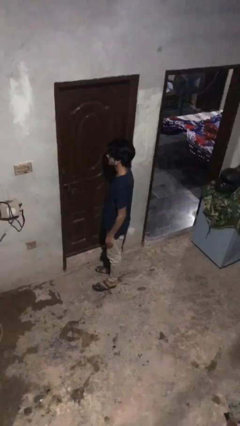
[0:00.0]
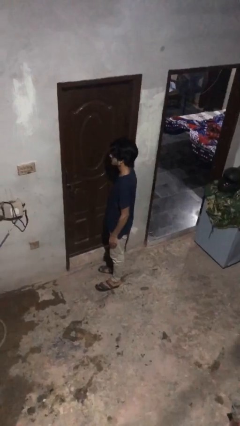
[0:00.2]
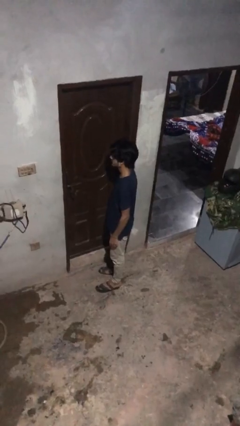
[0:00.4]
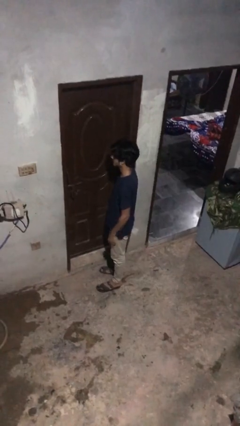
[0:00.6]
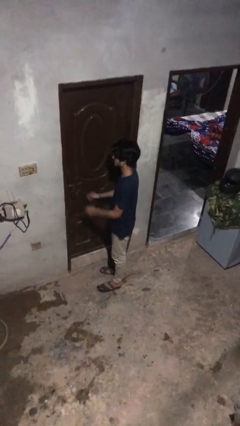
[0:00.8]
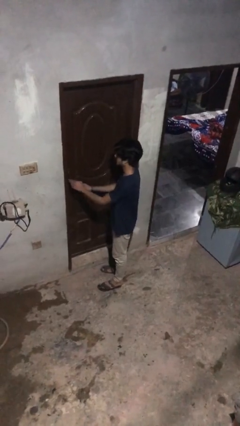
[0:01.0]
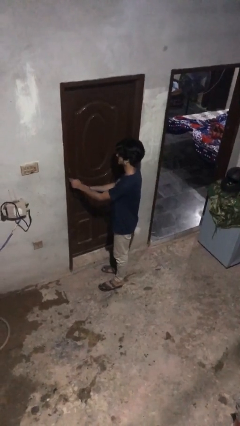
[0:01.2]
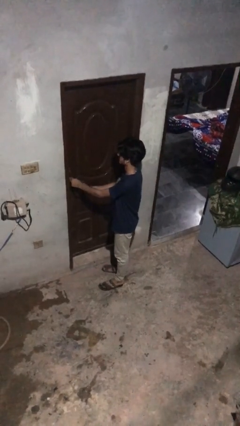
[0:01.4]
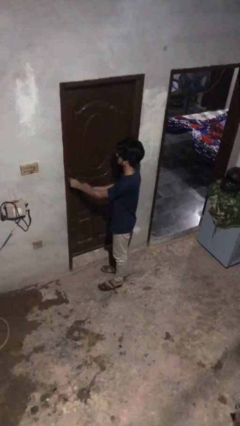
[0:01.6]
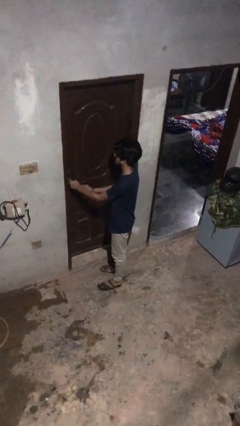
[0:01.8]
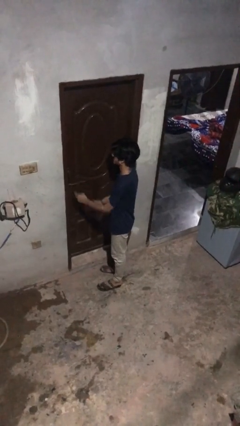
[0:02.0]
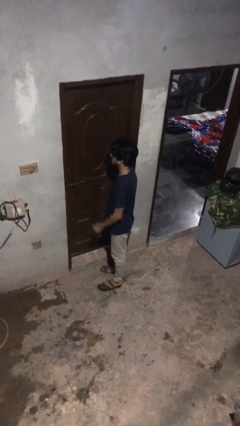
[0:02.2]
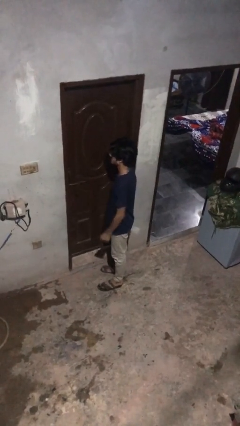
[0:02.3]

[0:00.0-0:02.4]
person unlocks door with keys

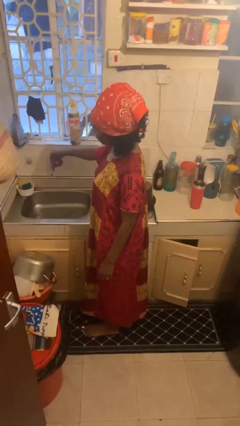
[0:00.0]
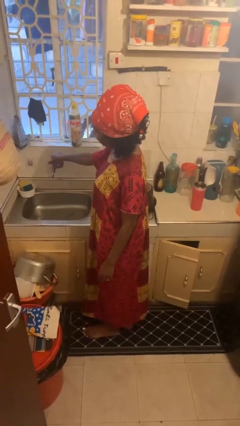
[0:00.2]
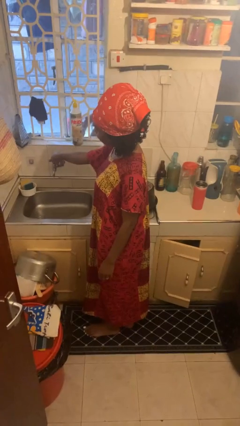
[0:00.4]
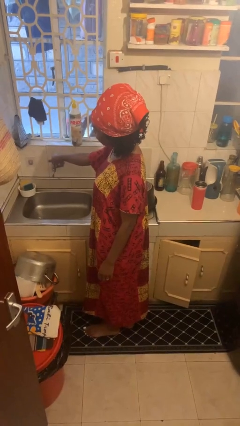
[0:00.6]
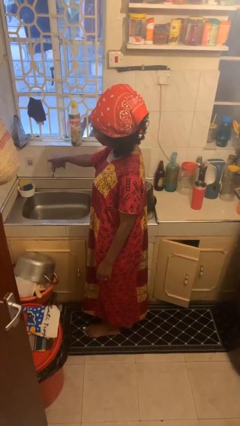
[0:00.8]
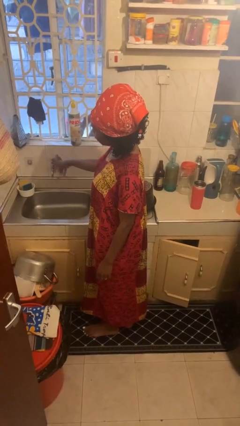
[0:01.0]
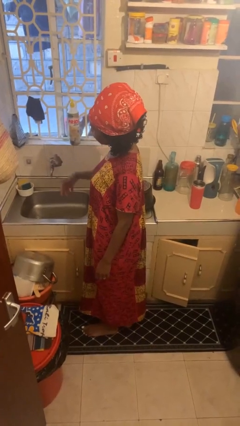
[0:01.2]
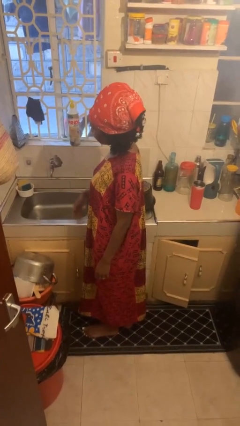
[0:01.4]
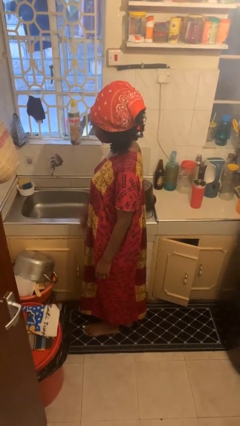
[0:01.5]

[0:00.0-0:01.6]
person turns off faucet

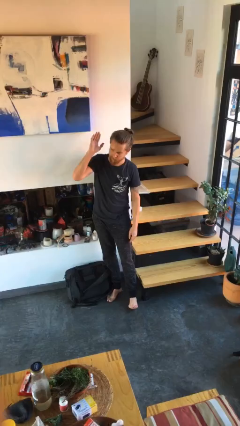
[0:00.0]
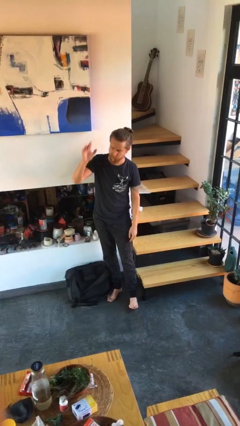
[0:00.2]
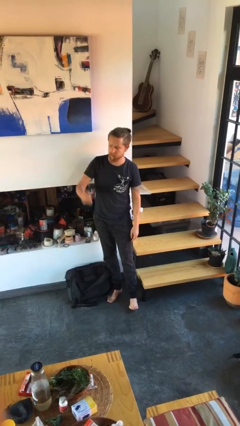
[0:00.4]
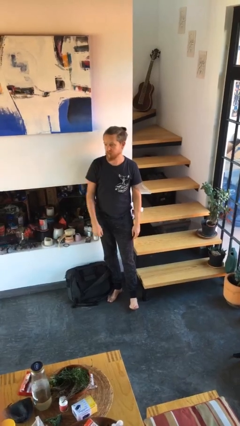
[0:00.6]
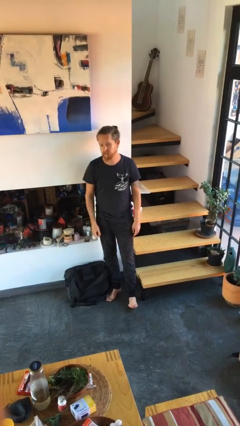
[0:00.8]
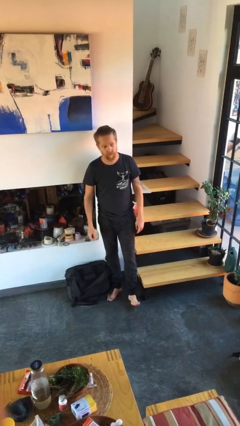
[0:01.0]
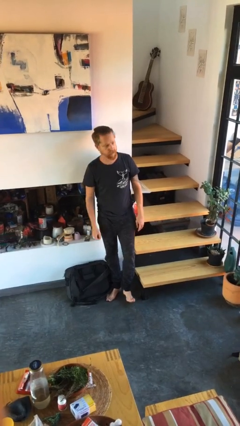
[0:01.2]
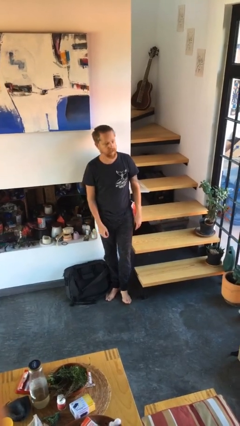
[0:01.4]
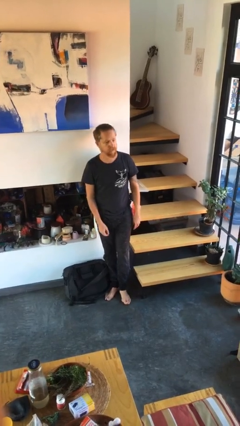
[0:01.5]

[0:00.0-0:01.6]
person gestures lower hand

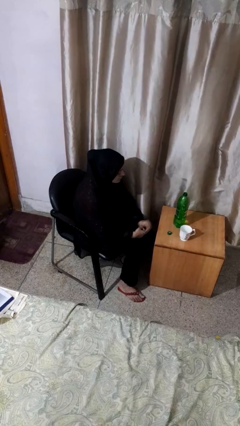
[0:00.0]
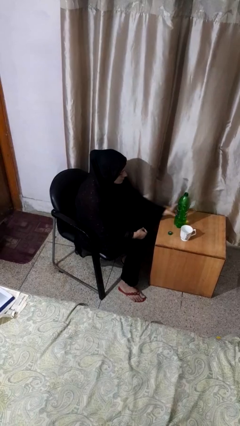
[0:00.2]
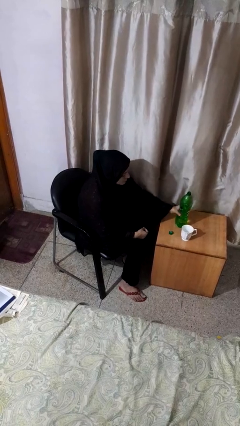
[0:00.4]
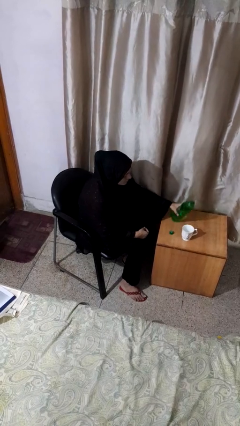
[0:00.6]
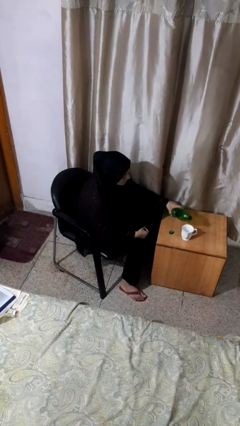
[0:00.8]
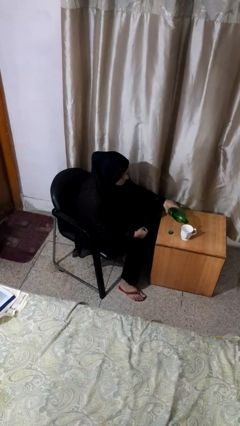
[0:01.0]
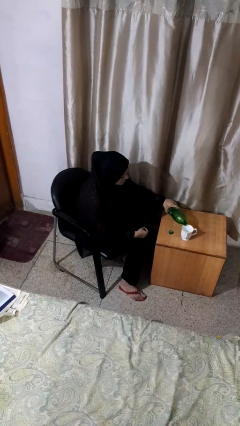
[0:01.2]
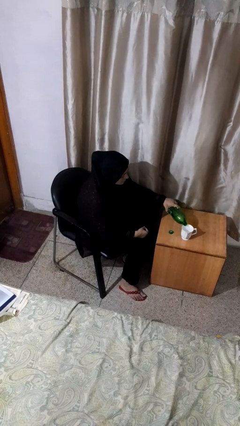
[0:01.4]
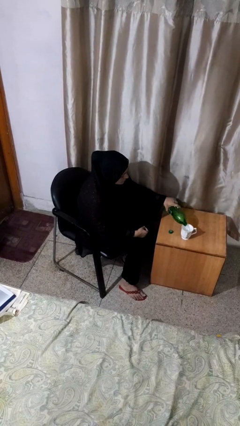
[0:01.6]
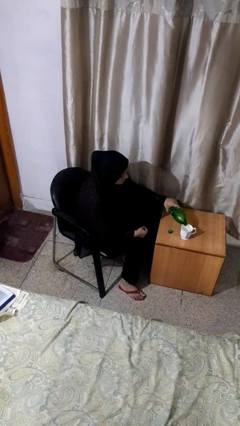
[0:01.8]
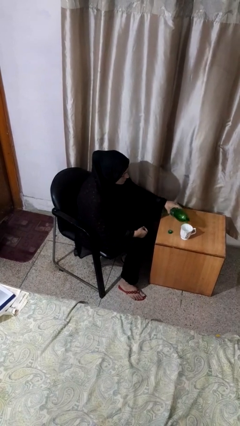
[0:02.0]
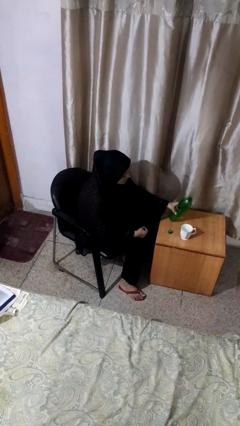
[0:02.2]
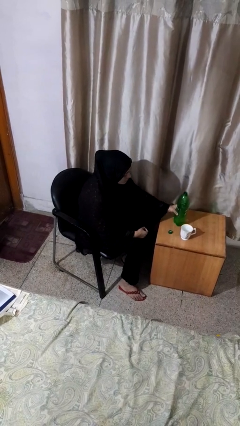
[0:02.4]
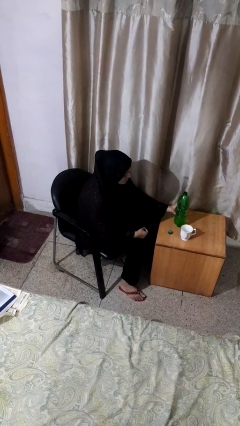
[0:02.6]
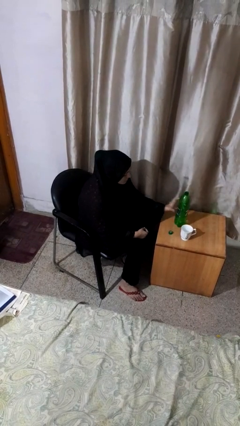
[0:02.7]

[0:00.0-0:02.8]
person pours liquid into cup

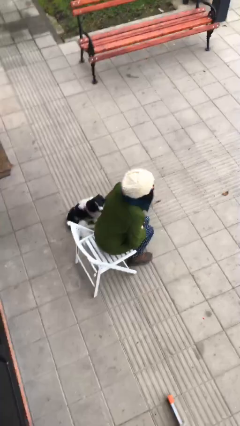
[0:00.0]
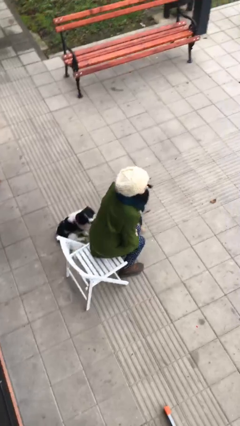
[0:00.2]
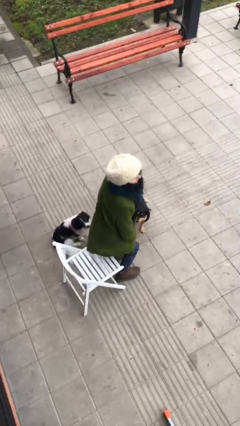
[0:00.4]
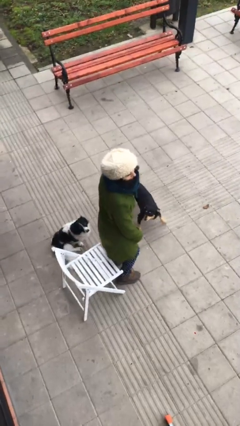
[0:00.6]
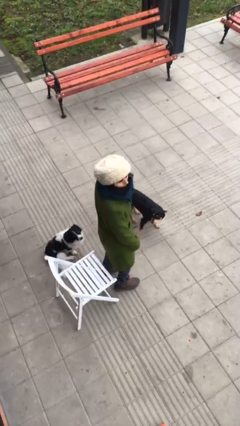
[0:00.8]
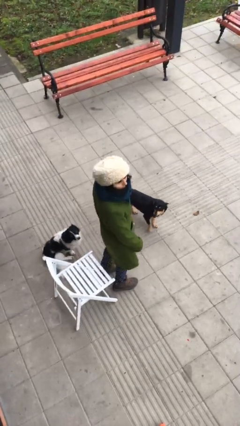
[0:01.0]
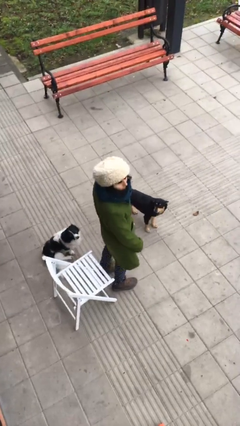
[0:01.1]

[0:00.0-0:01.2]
person stands up

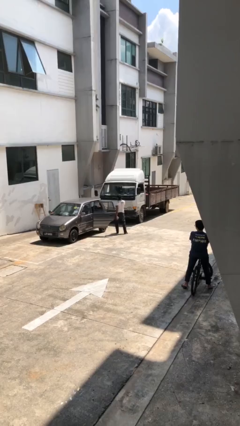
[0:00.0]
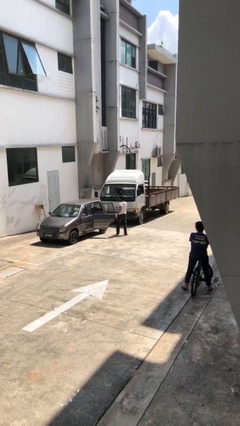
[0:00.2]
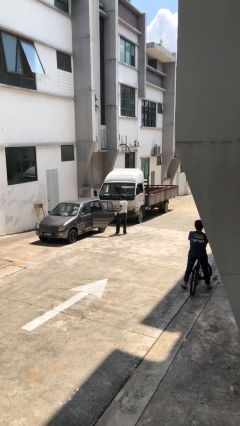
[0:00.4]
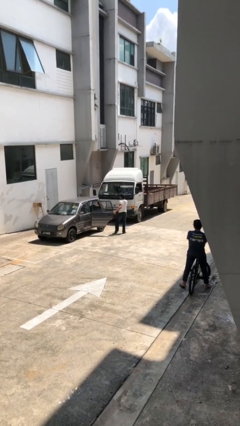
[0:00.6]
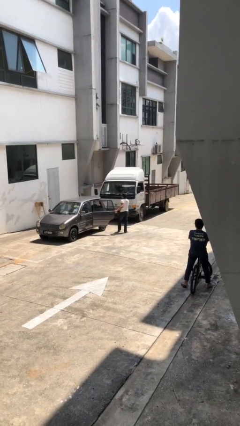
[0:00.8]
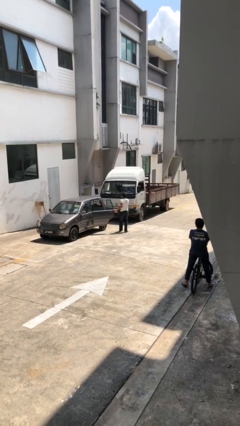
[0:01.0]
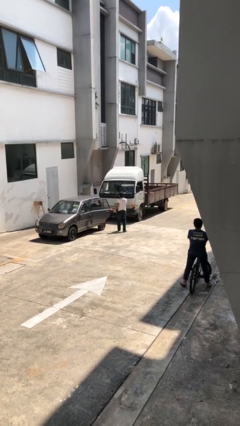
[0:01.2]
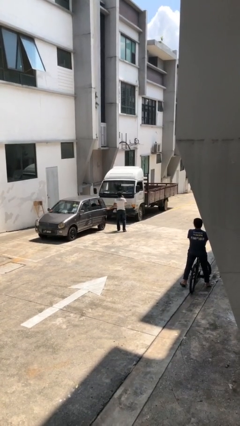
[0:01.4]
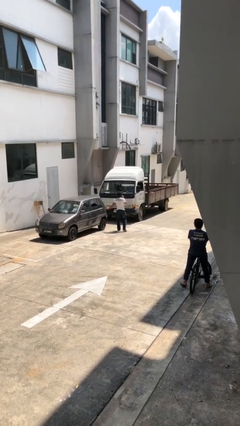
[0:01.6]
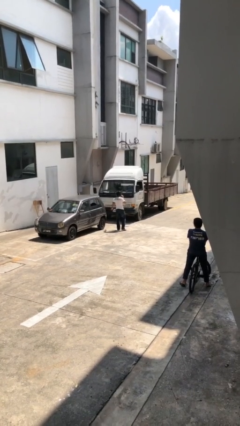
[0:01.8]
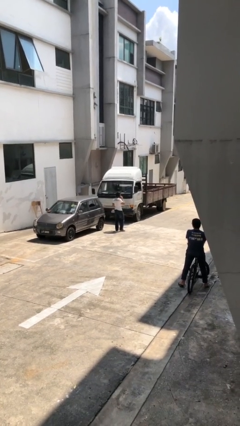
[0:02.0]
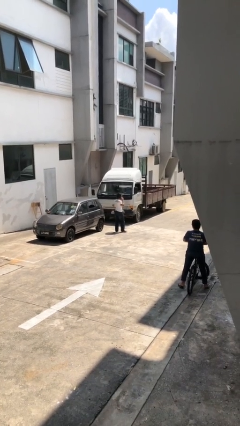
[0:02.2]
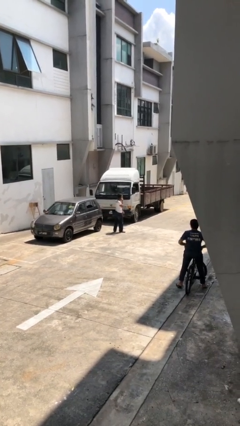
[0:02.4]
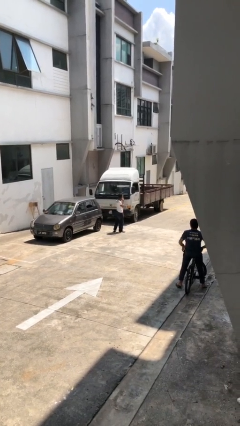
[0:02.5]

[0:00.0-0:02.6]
person closes car door

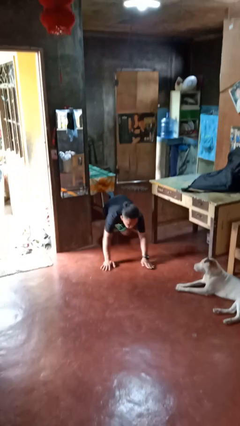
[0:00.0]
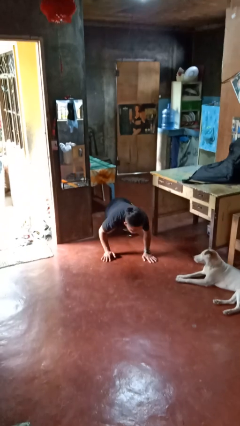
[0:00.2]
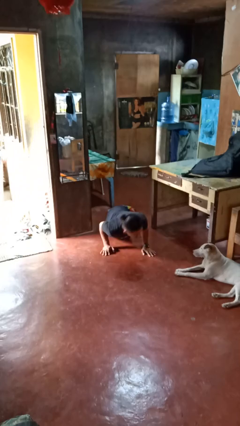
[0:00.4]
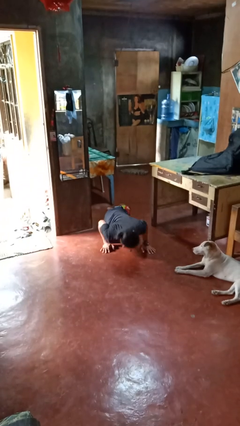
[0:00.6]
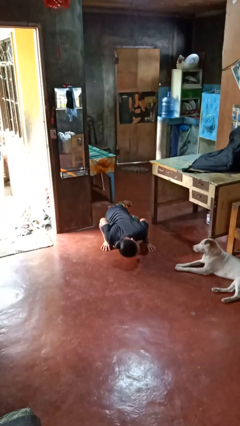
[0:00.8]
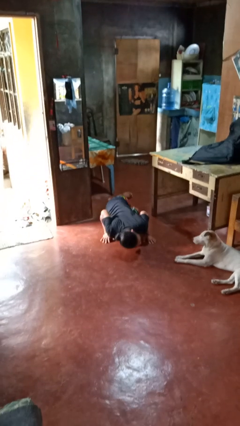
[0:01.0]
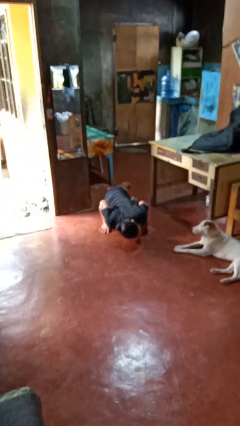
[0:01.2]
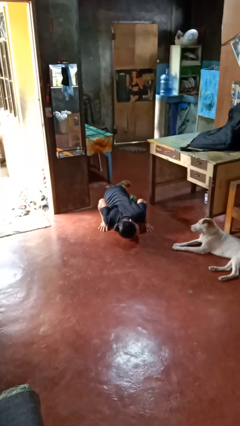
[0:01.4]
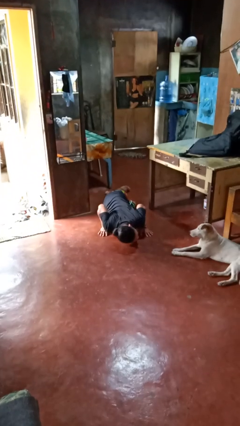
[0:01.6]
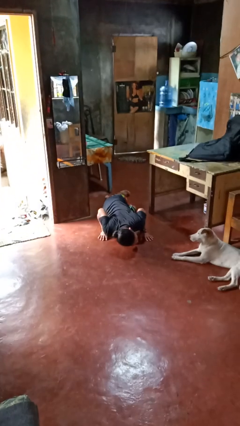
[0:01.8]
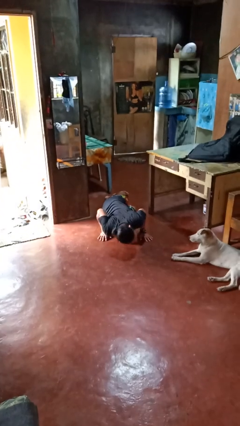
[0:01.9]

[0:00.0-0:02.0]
person lies down on floor

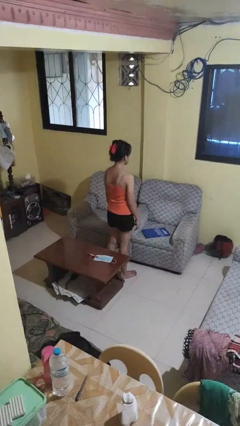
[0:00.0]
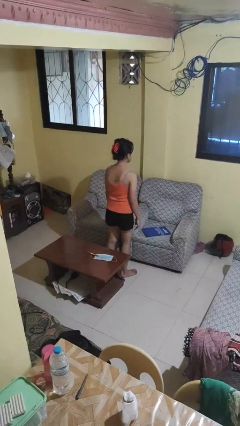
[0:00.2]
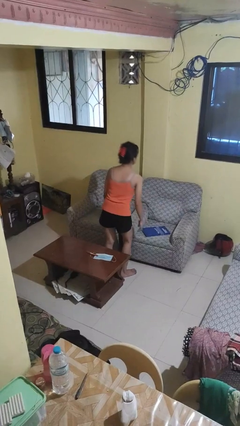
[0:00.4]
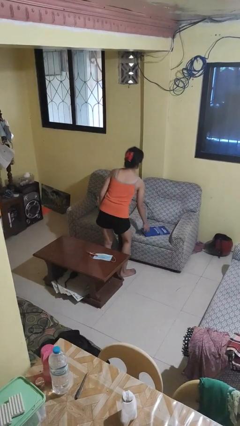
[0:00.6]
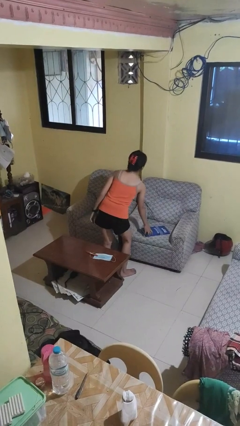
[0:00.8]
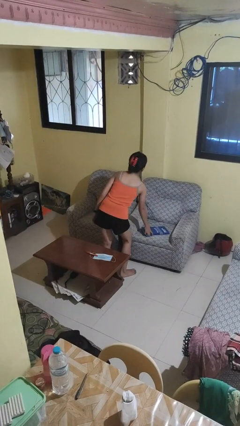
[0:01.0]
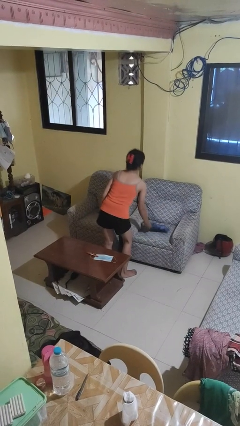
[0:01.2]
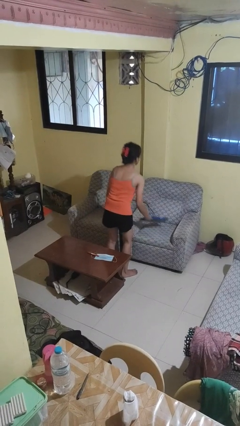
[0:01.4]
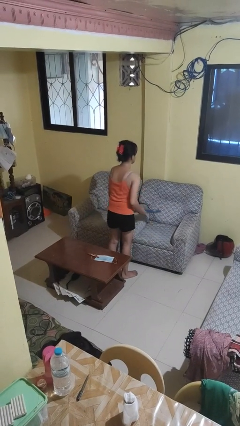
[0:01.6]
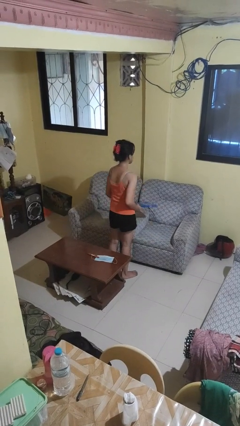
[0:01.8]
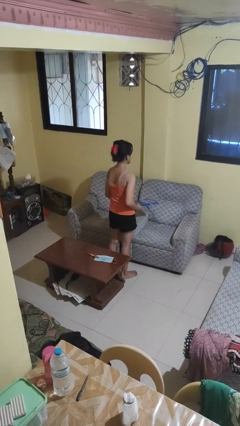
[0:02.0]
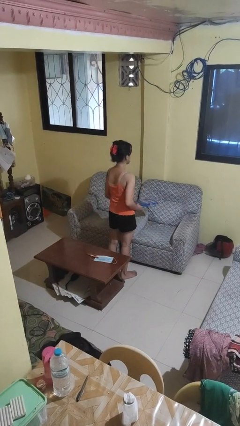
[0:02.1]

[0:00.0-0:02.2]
person picks up object from couch

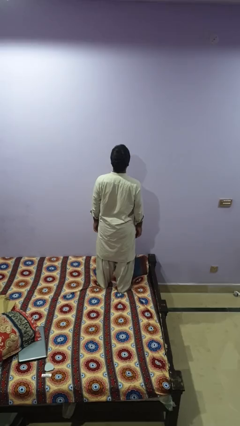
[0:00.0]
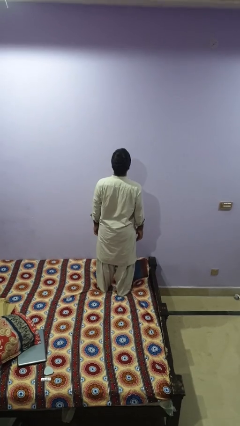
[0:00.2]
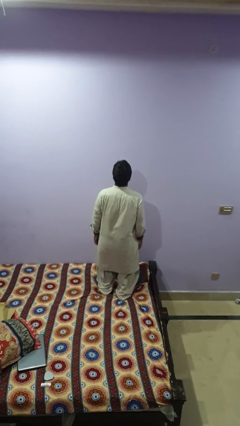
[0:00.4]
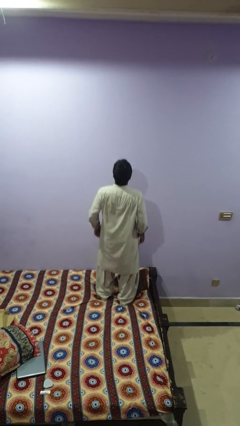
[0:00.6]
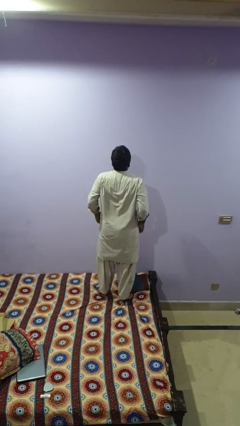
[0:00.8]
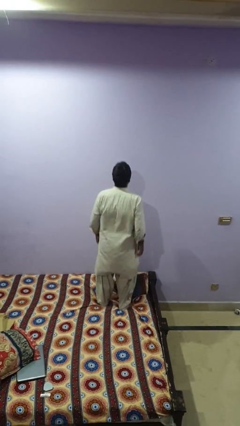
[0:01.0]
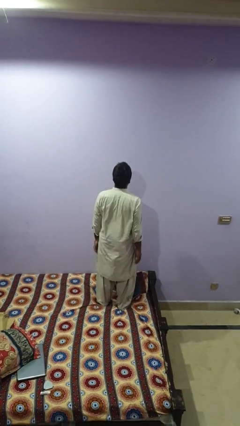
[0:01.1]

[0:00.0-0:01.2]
person jumps on bed
